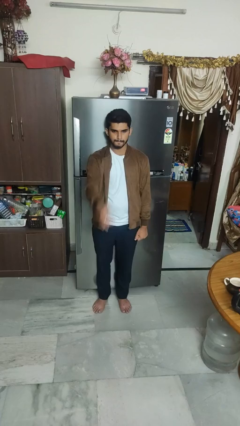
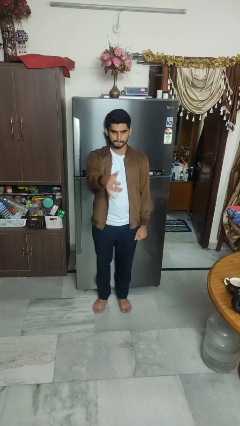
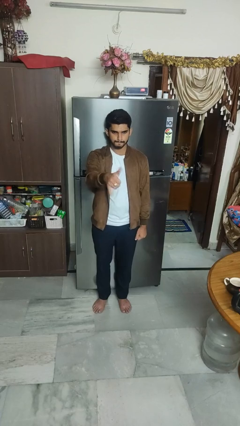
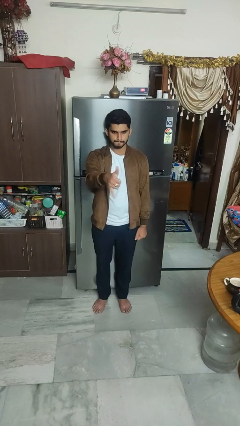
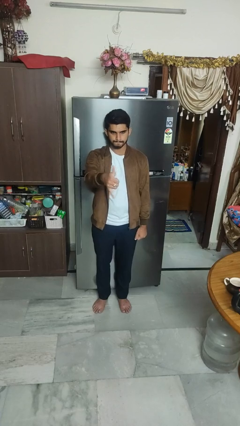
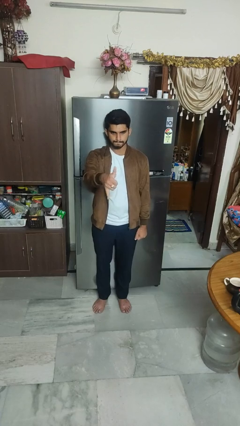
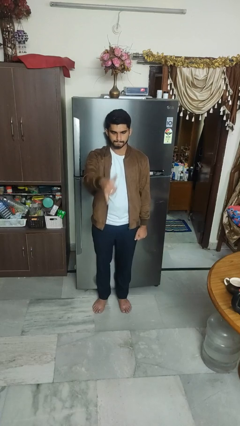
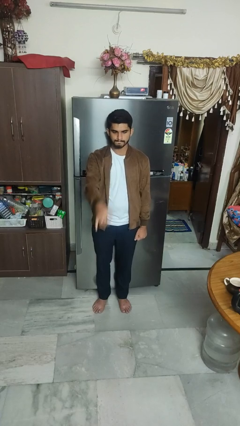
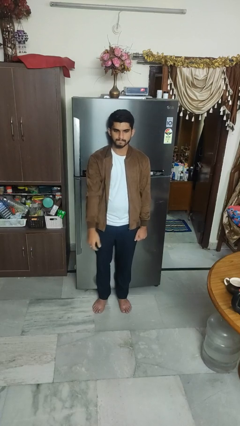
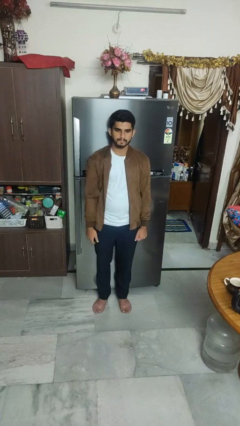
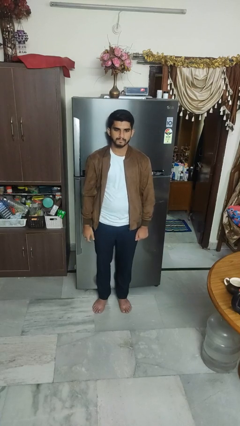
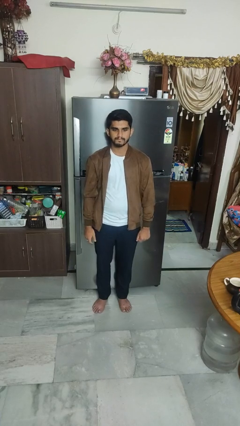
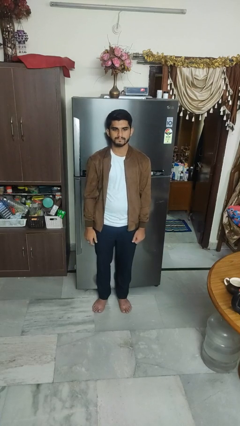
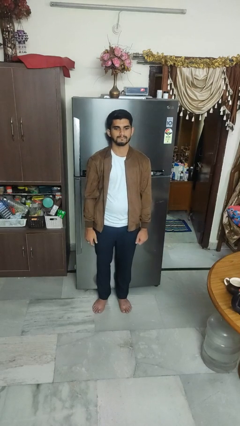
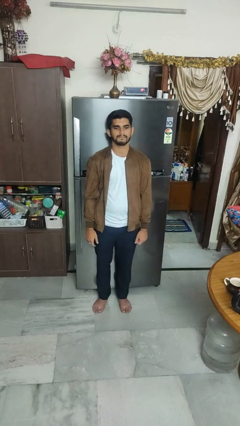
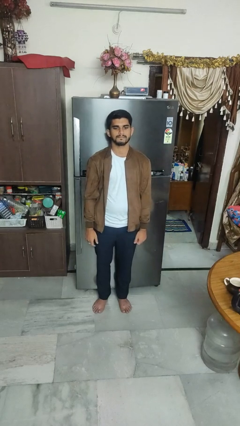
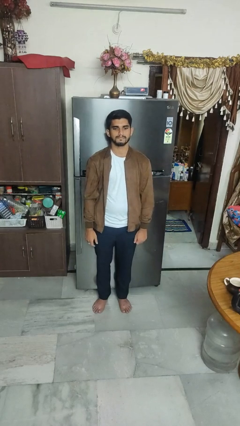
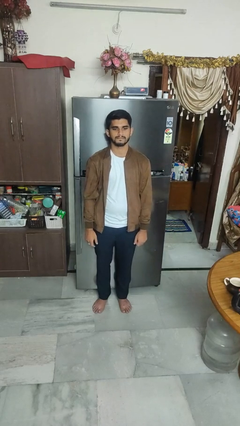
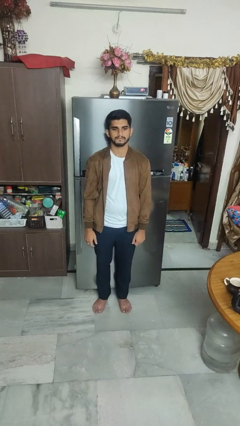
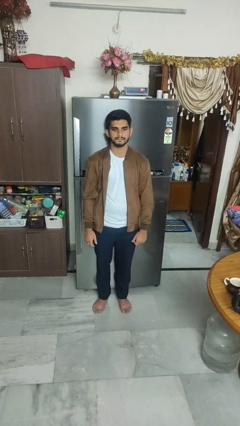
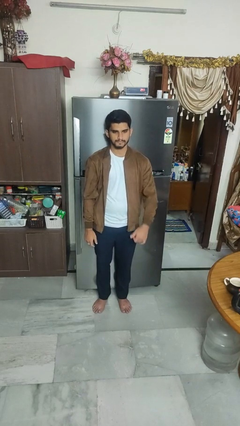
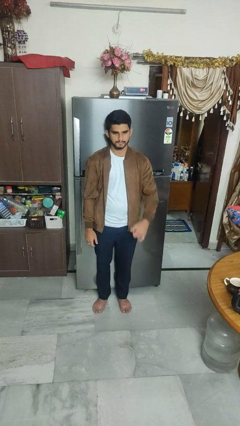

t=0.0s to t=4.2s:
person gestures hang loose

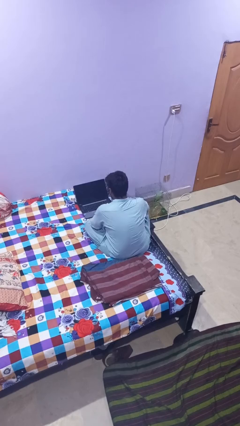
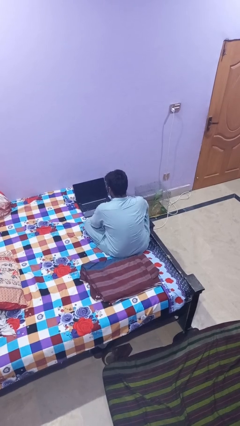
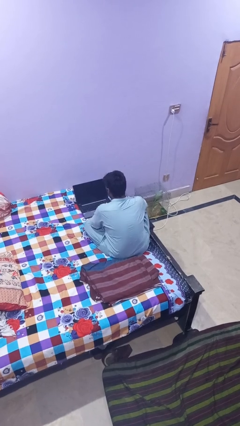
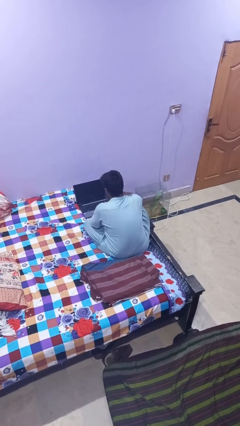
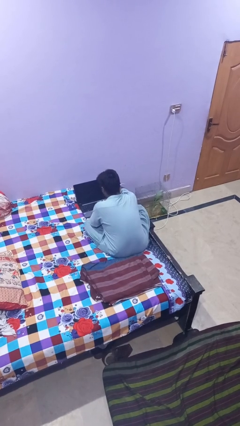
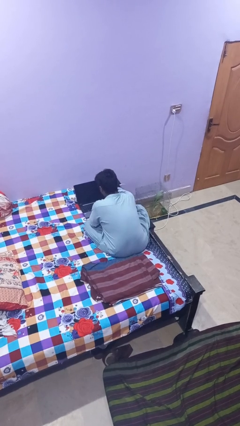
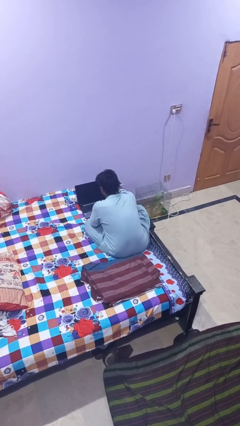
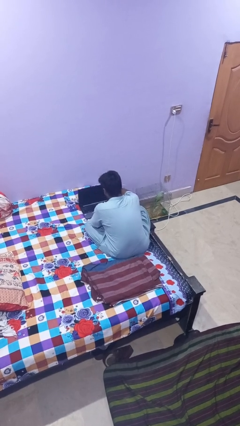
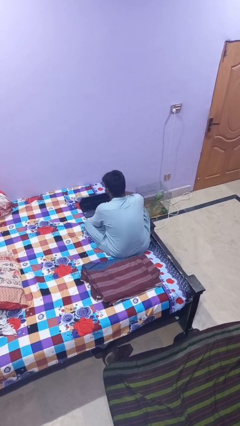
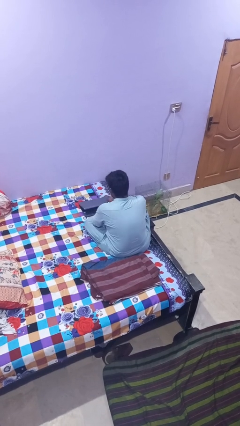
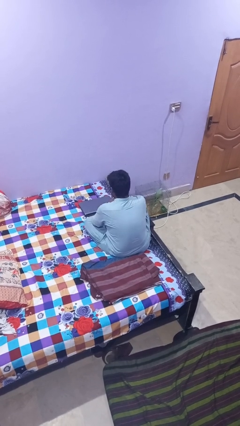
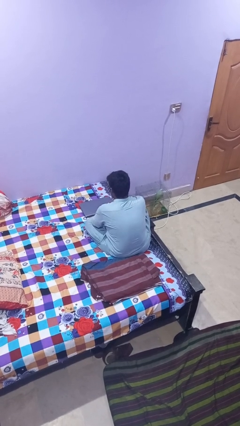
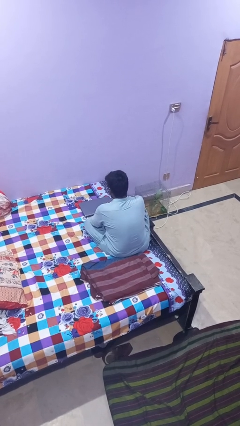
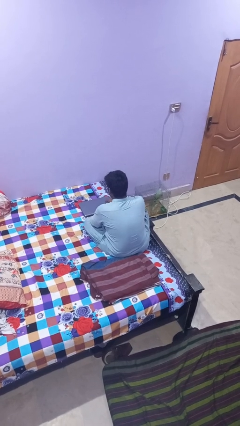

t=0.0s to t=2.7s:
person closes laptop

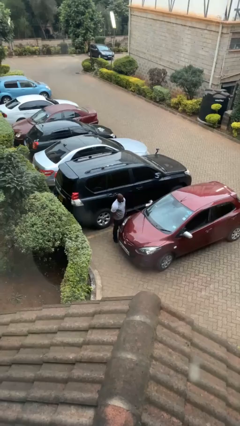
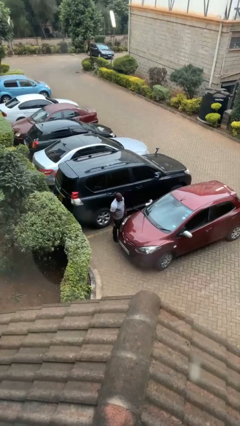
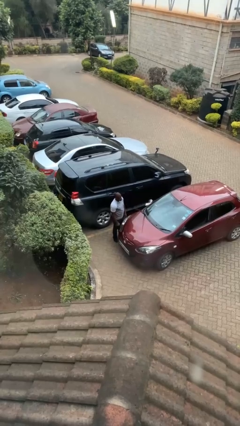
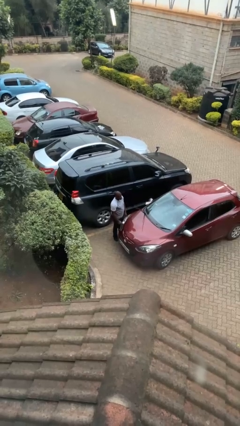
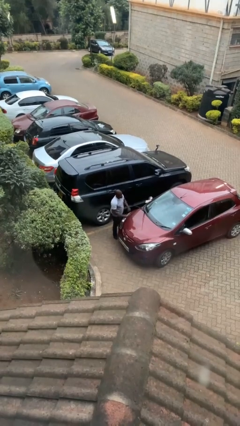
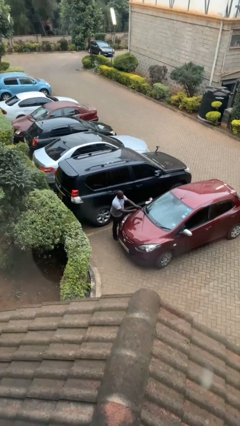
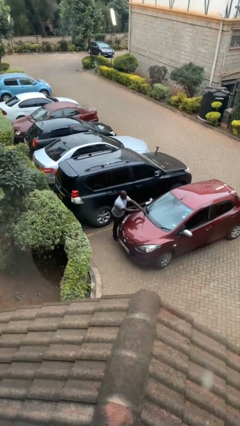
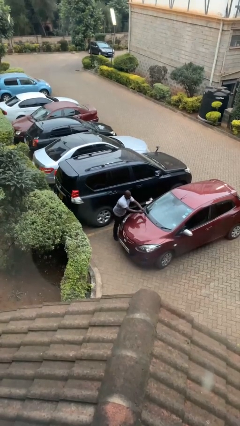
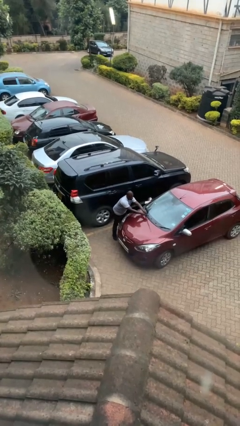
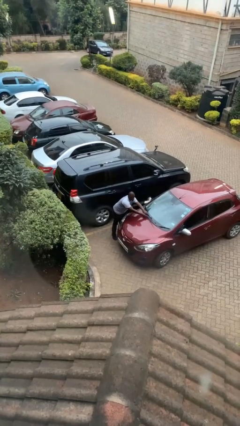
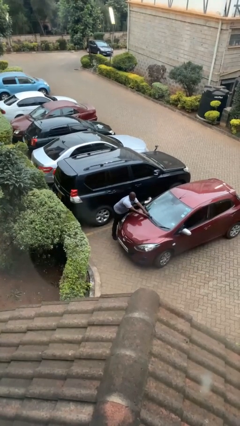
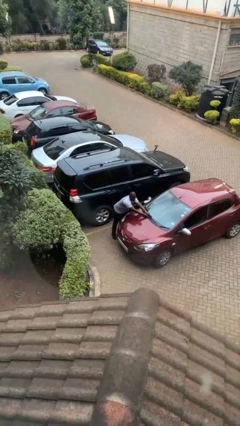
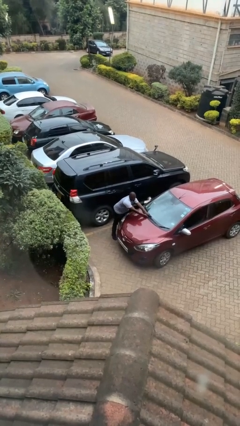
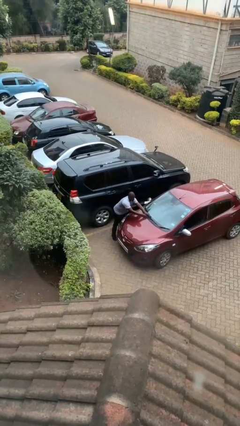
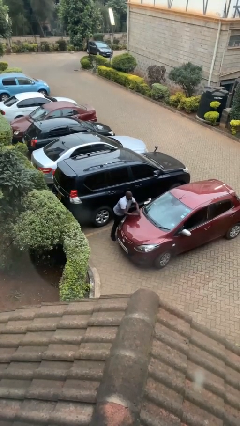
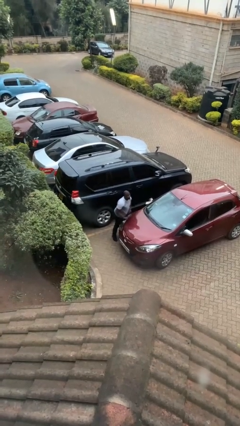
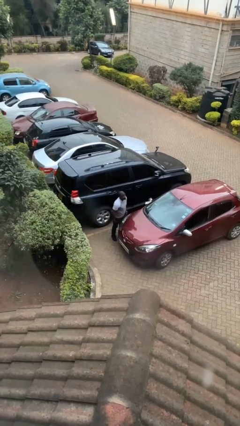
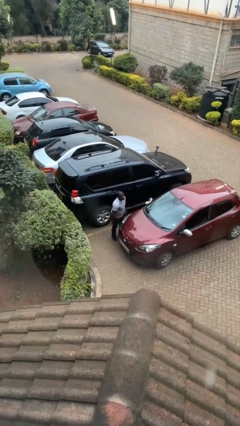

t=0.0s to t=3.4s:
person flips down car wipers

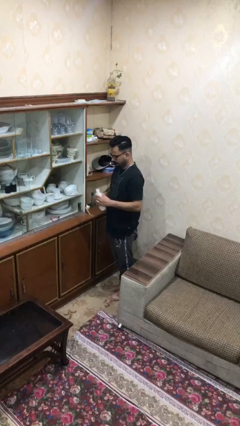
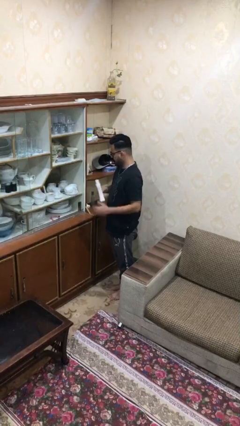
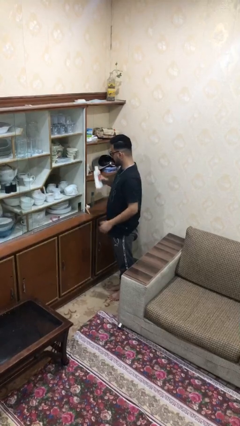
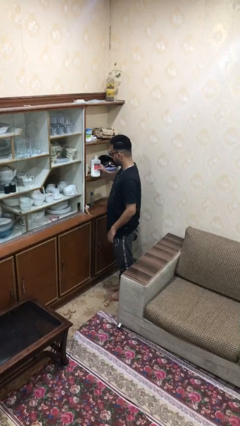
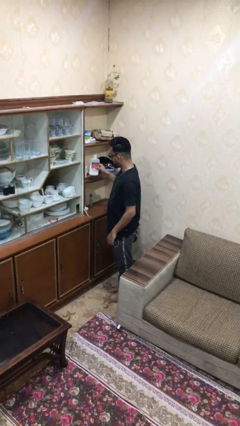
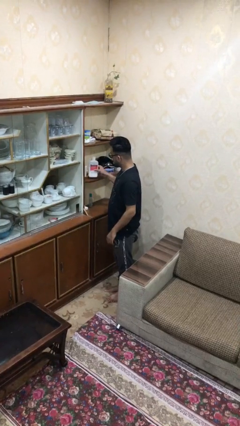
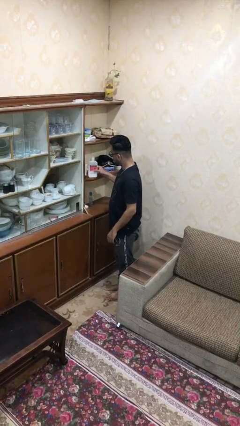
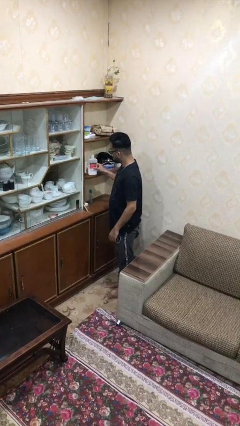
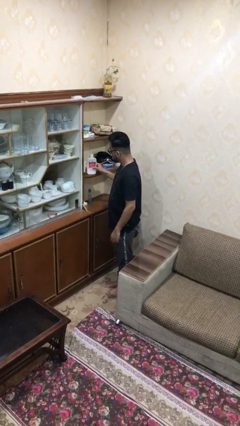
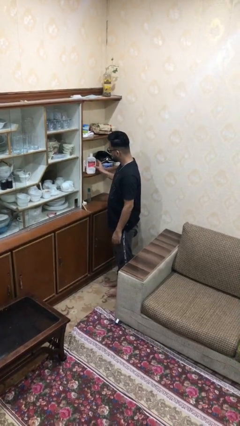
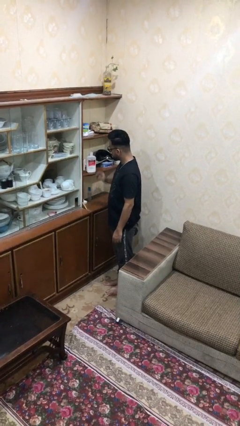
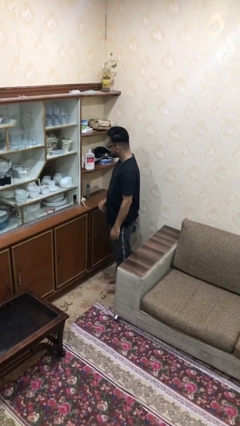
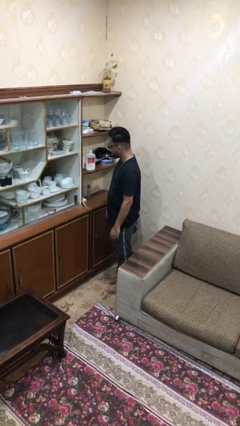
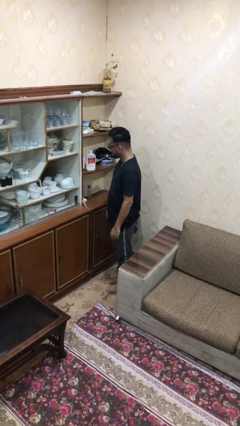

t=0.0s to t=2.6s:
person puts down object on shelf

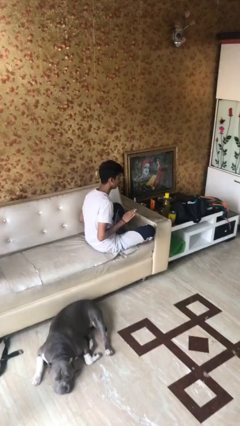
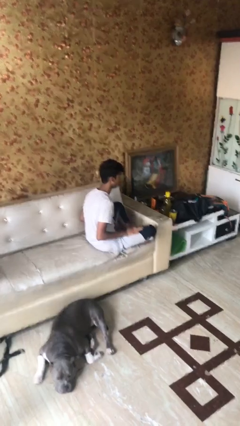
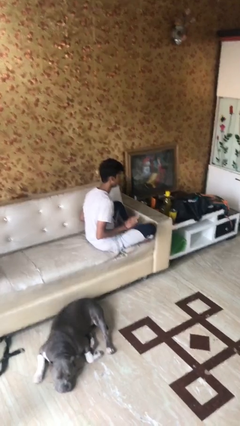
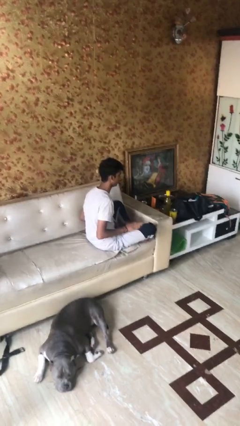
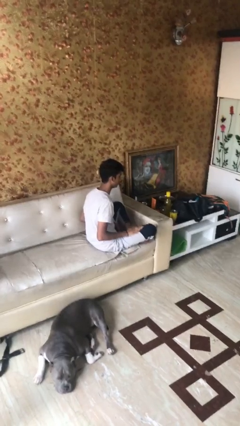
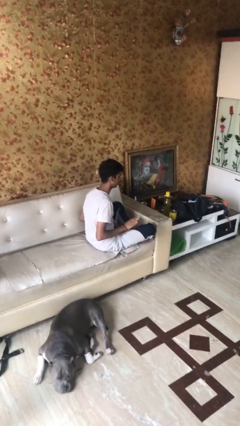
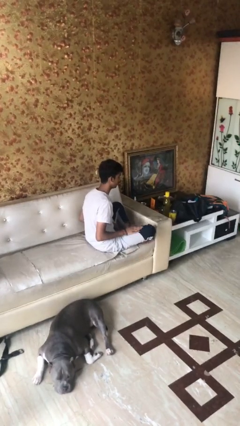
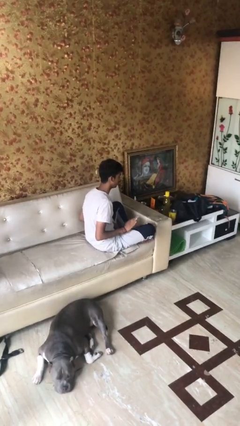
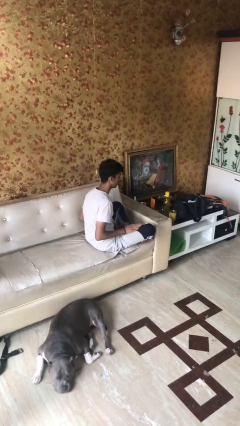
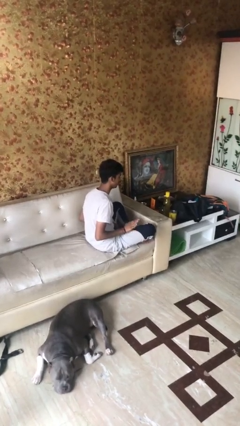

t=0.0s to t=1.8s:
person slaps hands on thighs

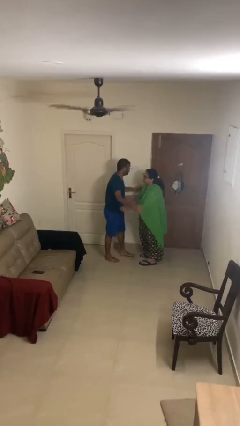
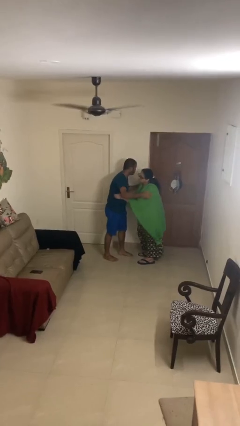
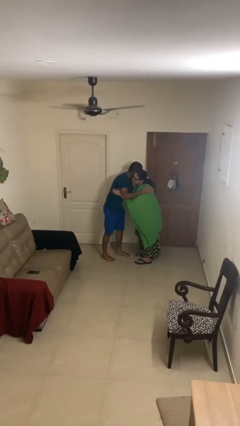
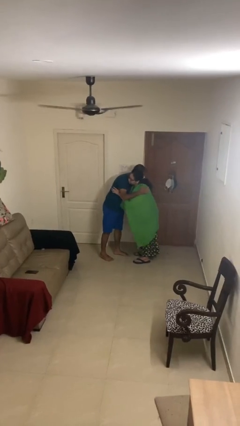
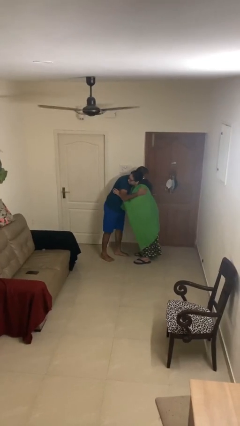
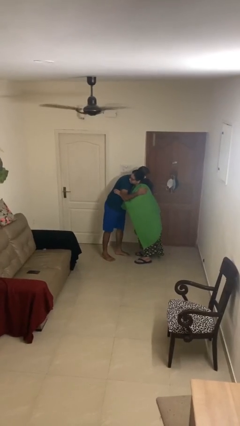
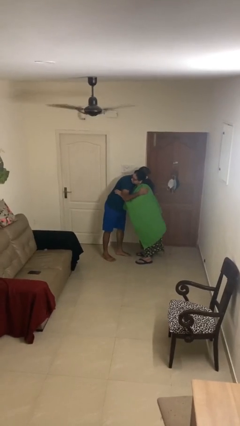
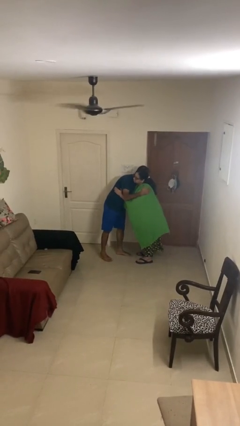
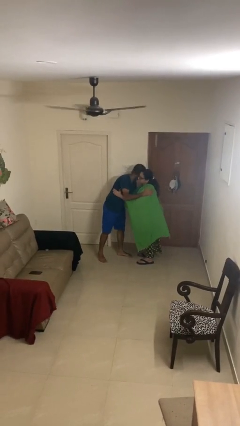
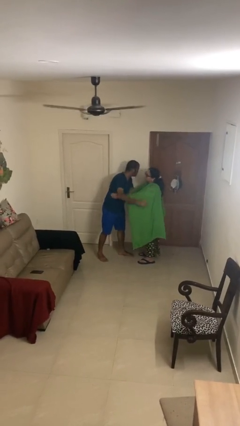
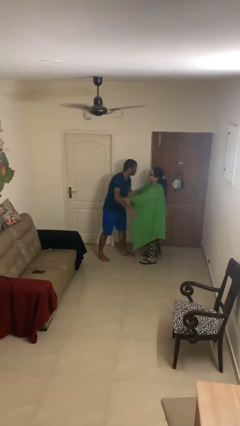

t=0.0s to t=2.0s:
person embraces person

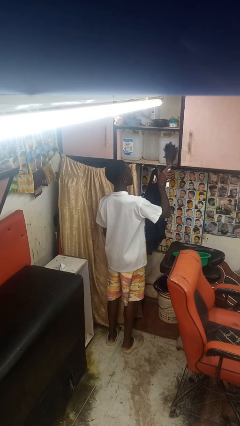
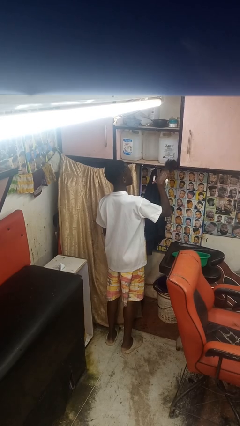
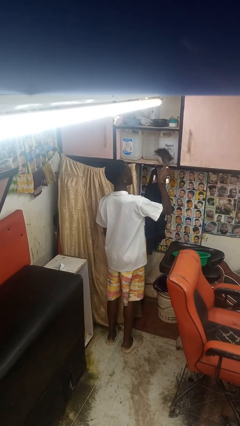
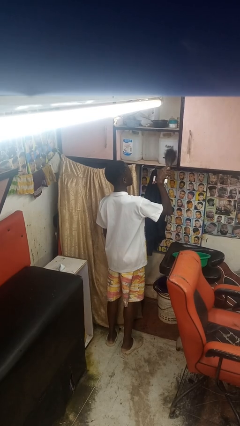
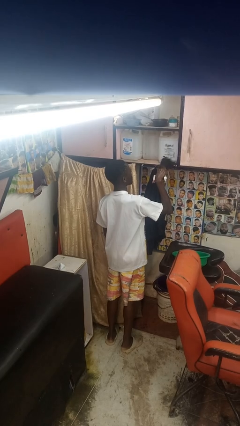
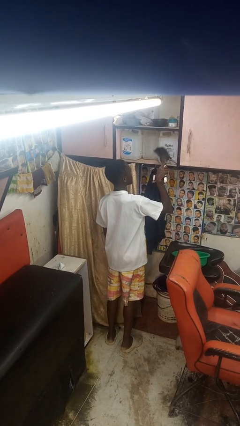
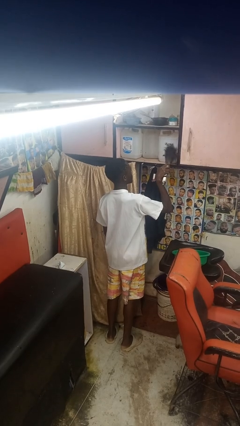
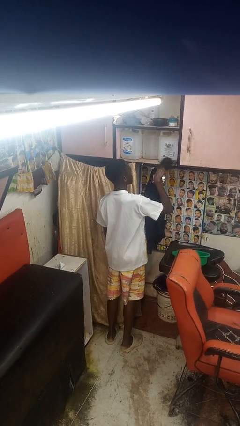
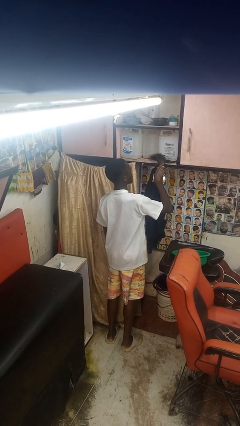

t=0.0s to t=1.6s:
person dusts furniture
